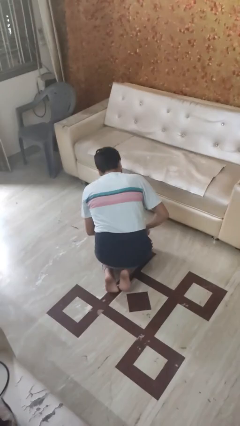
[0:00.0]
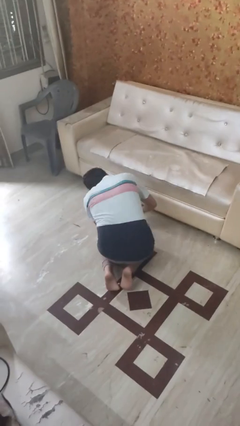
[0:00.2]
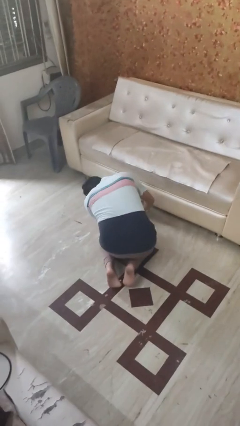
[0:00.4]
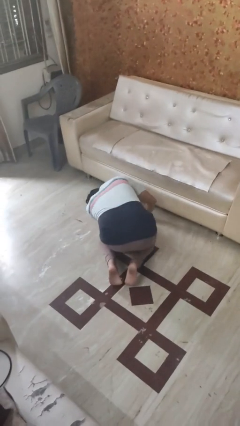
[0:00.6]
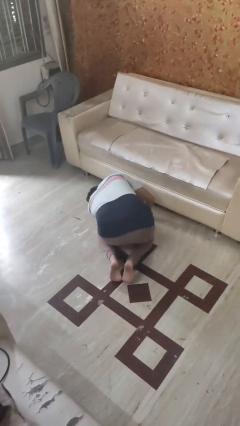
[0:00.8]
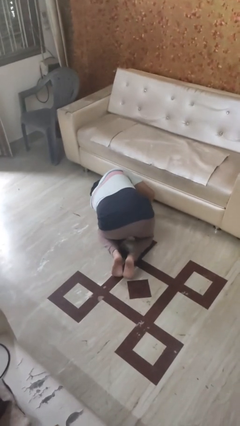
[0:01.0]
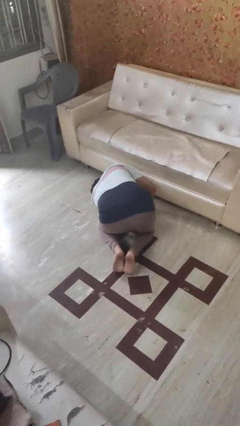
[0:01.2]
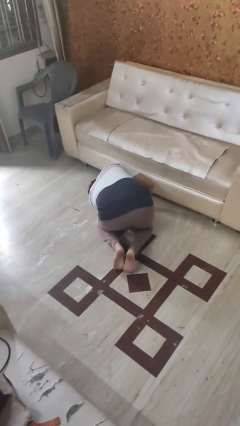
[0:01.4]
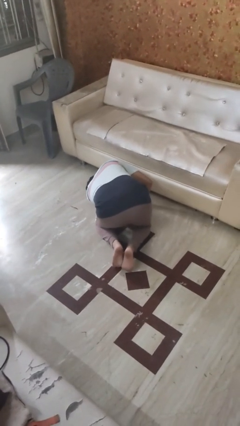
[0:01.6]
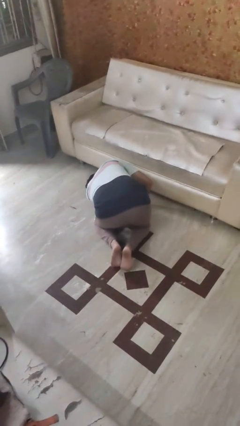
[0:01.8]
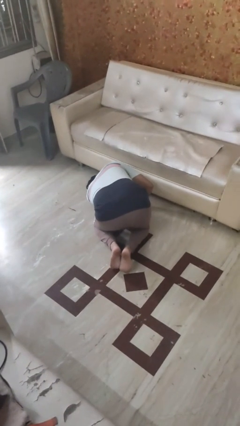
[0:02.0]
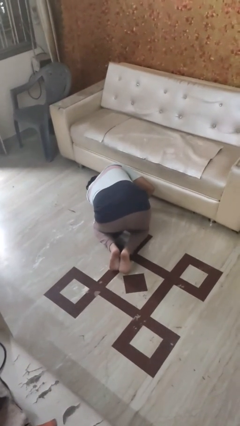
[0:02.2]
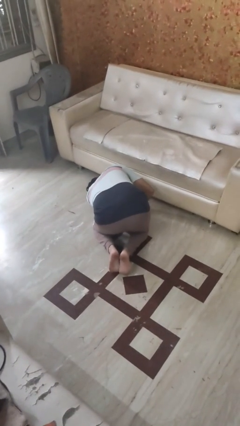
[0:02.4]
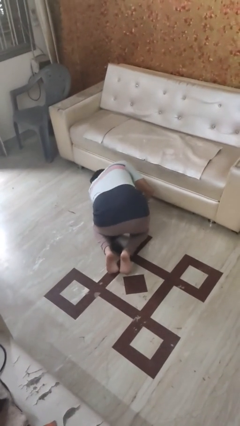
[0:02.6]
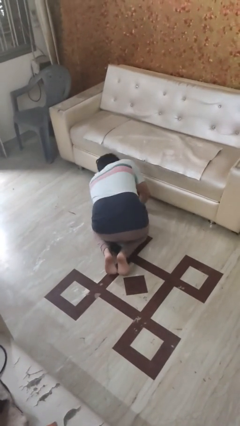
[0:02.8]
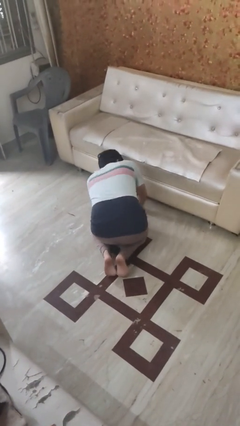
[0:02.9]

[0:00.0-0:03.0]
person searches under bed

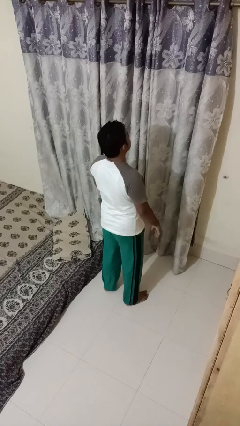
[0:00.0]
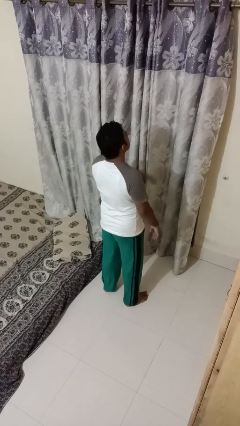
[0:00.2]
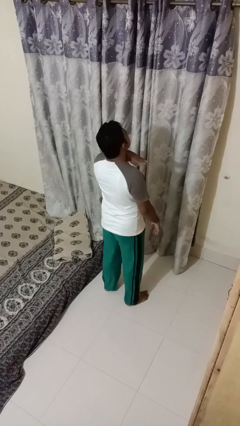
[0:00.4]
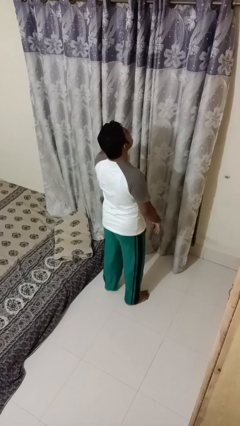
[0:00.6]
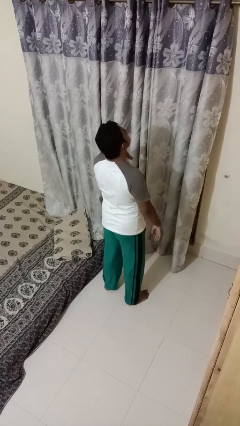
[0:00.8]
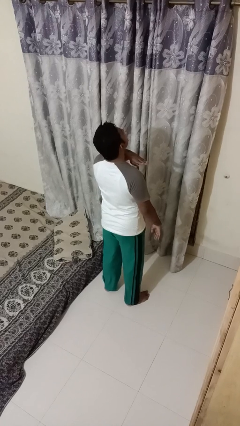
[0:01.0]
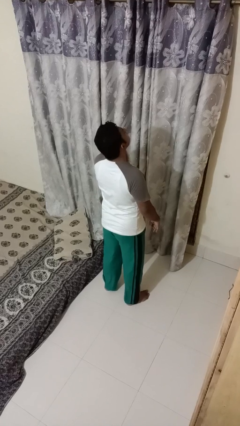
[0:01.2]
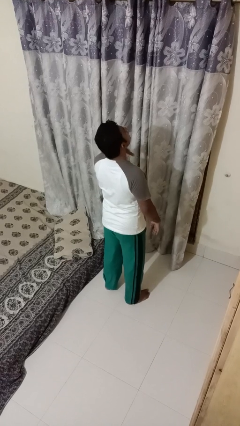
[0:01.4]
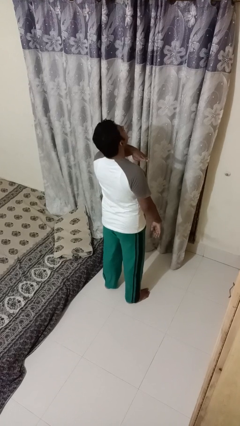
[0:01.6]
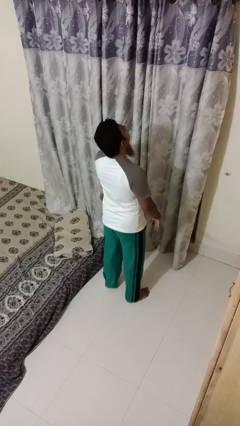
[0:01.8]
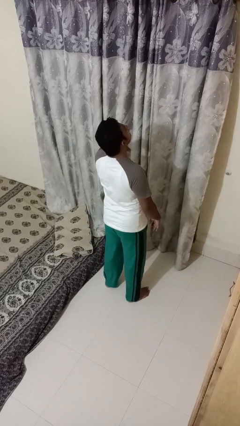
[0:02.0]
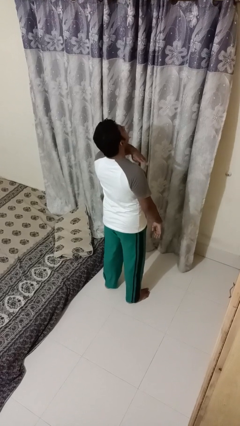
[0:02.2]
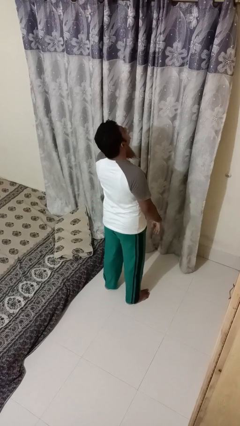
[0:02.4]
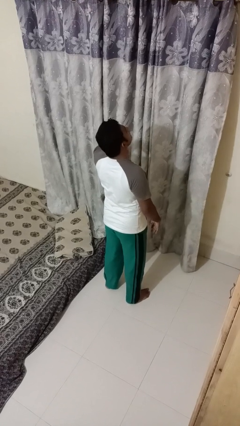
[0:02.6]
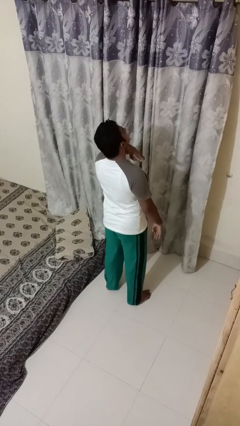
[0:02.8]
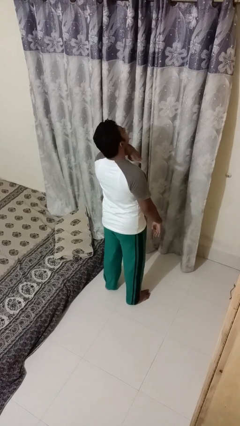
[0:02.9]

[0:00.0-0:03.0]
person gestures cut

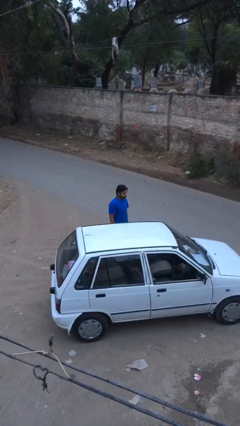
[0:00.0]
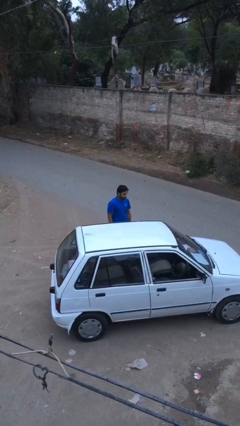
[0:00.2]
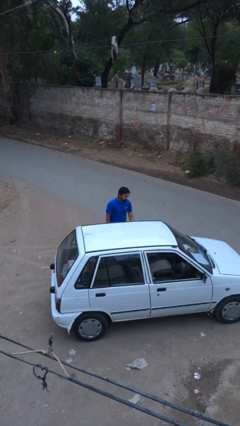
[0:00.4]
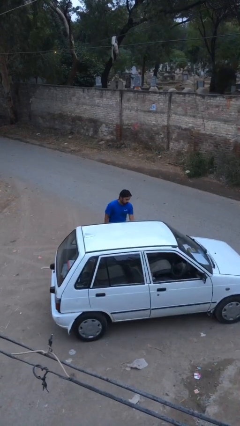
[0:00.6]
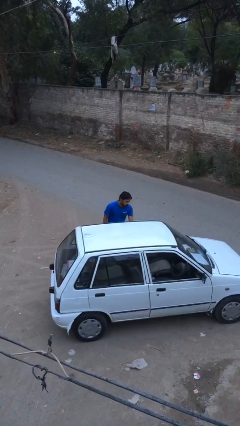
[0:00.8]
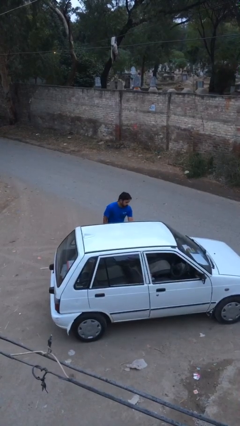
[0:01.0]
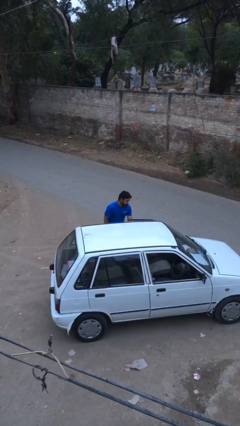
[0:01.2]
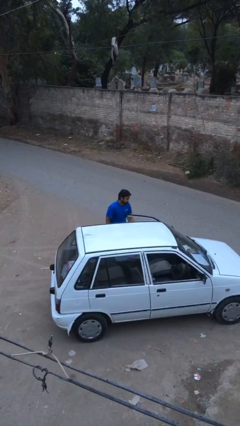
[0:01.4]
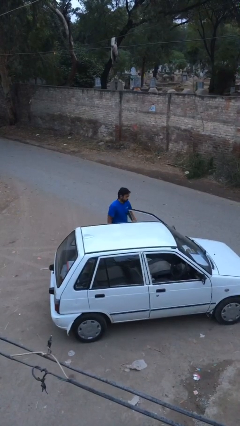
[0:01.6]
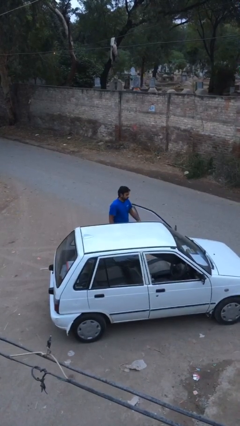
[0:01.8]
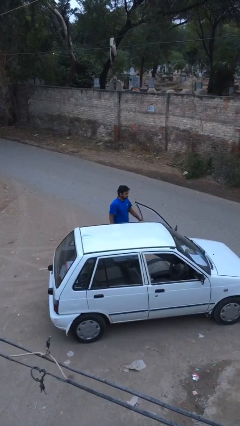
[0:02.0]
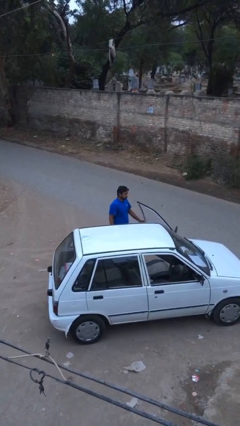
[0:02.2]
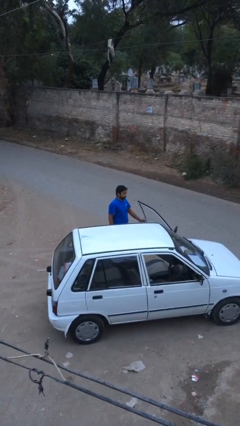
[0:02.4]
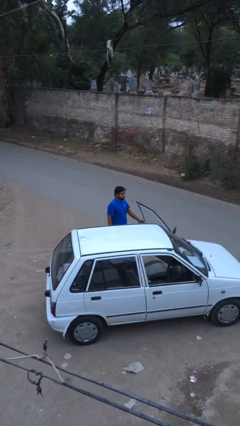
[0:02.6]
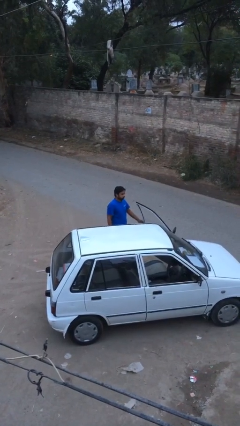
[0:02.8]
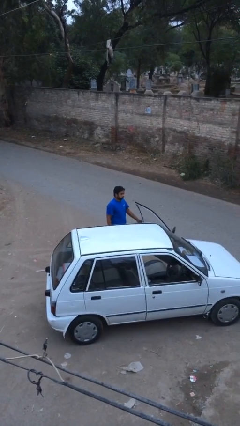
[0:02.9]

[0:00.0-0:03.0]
person opens car door

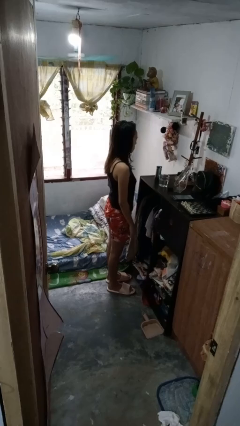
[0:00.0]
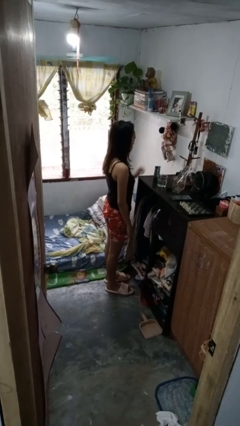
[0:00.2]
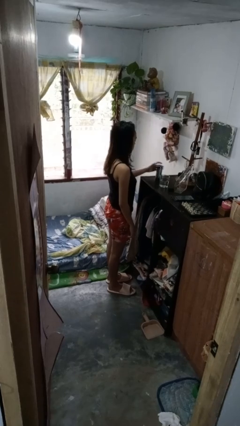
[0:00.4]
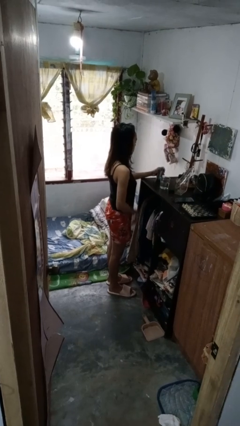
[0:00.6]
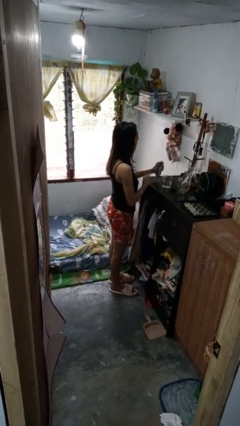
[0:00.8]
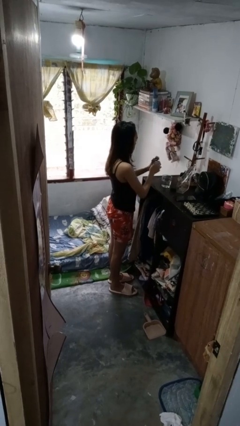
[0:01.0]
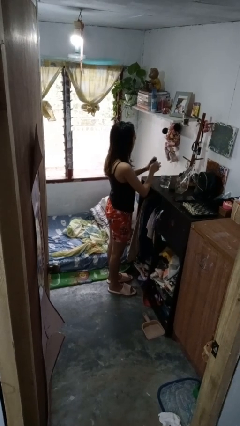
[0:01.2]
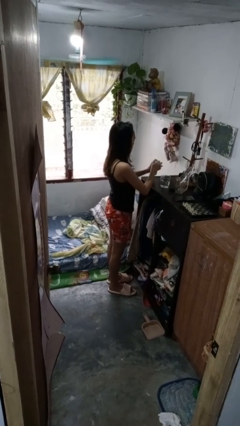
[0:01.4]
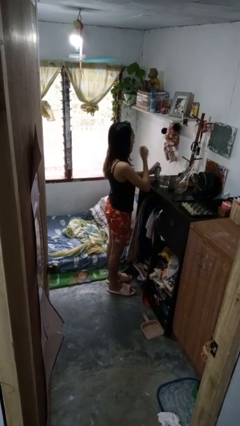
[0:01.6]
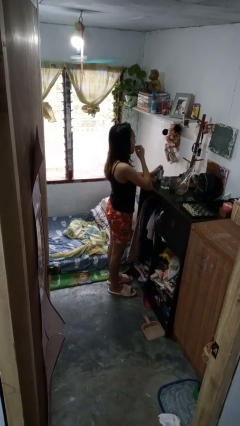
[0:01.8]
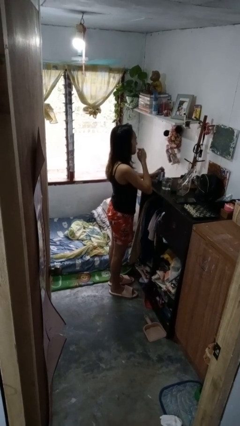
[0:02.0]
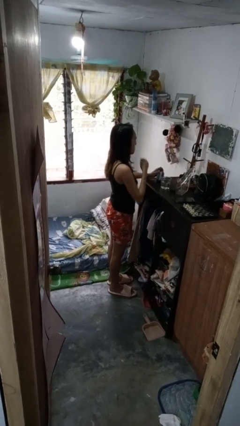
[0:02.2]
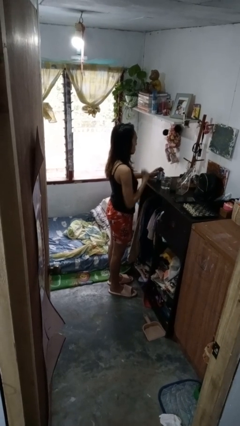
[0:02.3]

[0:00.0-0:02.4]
person takes medicine pills

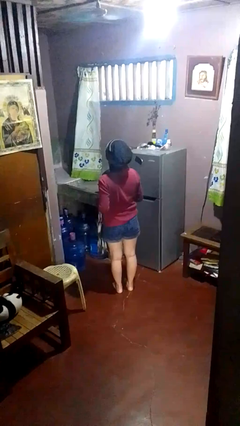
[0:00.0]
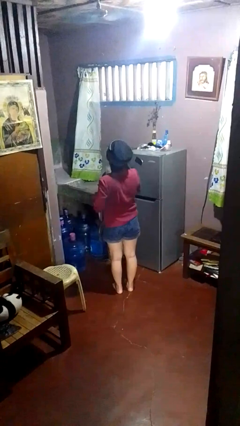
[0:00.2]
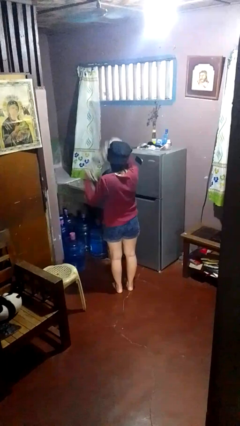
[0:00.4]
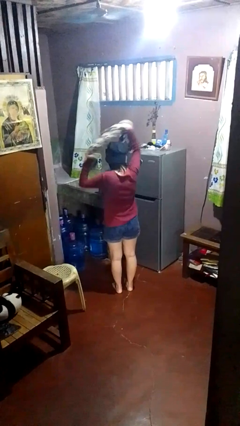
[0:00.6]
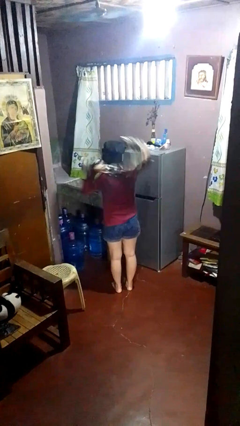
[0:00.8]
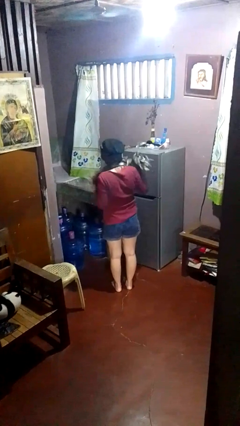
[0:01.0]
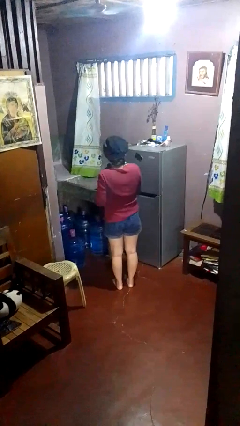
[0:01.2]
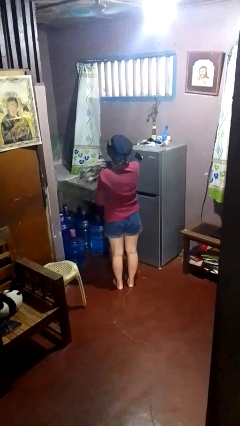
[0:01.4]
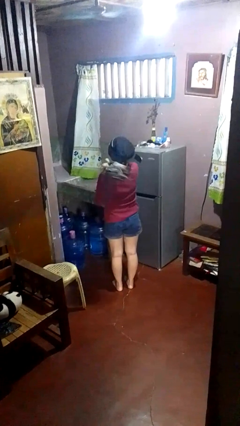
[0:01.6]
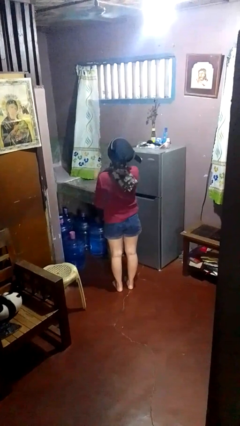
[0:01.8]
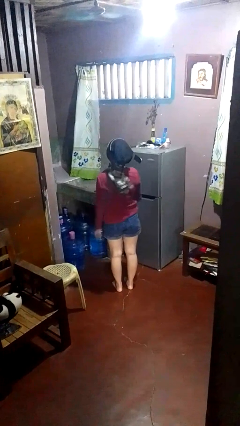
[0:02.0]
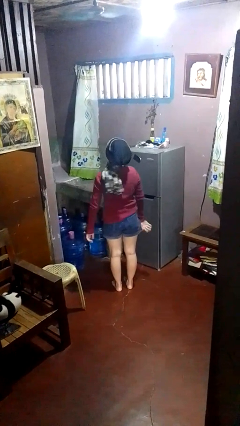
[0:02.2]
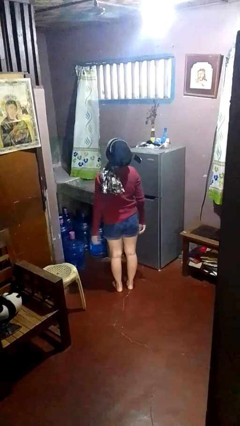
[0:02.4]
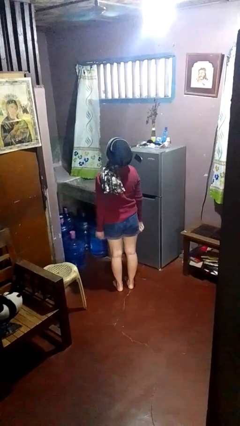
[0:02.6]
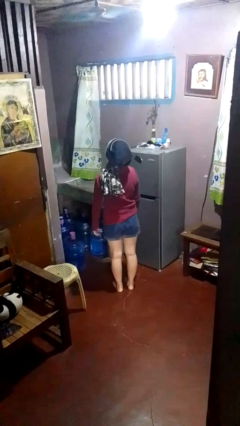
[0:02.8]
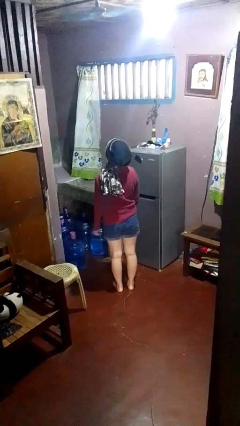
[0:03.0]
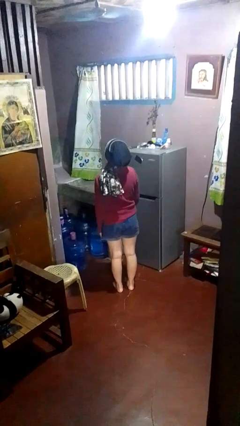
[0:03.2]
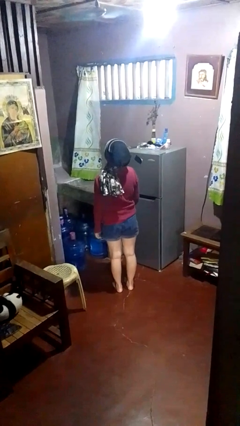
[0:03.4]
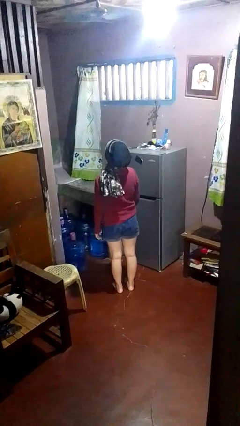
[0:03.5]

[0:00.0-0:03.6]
person puts on scarf

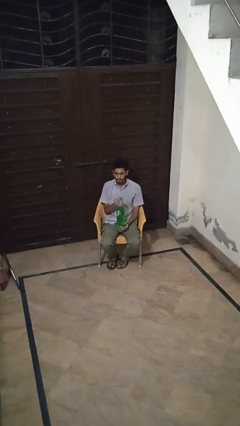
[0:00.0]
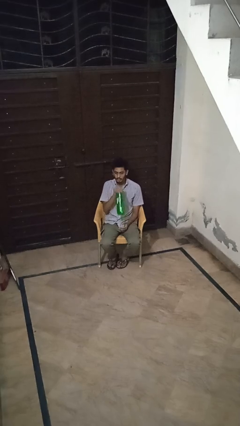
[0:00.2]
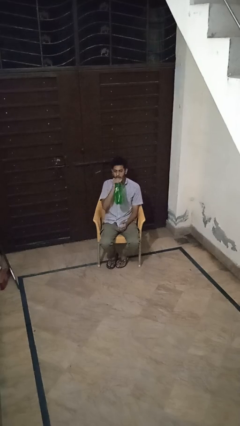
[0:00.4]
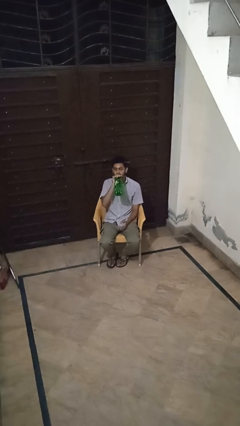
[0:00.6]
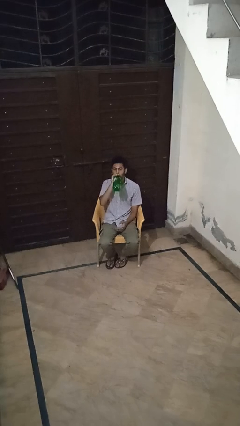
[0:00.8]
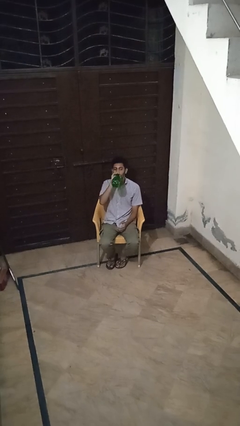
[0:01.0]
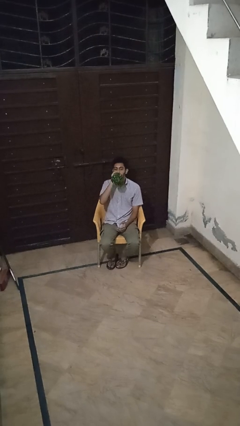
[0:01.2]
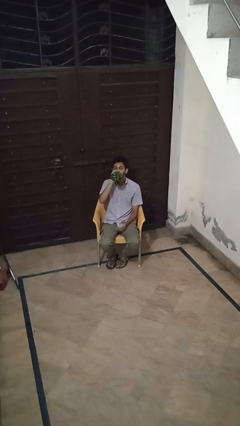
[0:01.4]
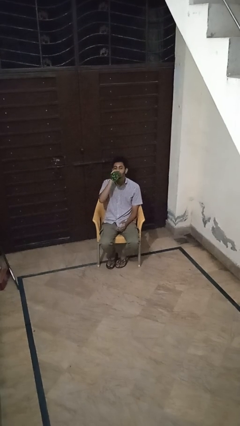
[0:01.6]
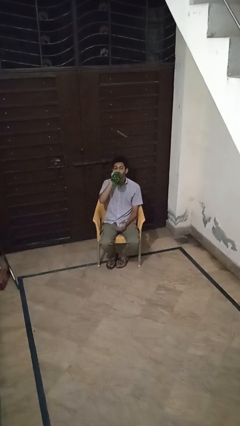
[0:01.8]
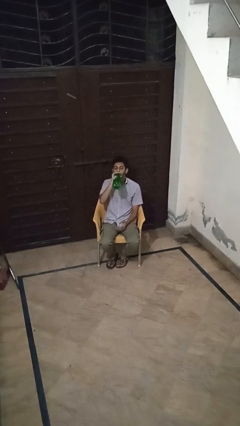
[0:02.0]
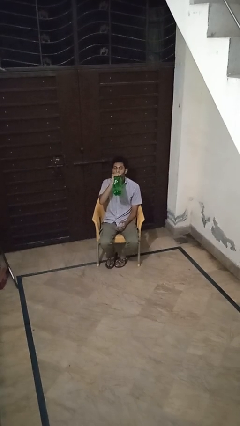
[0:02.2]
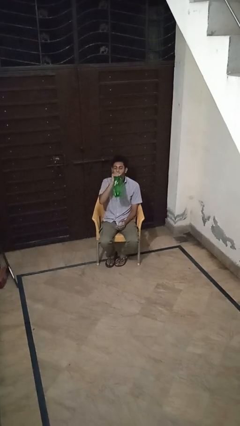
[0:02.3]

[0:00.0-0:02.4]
person drinks from bottle
